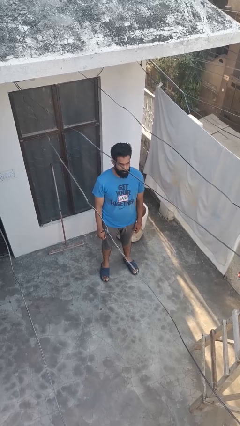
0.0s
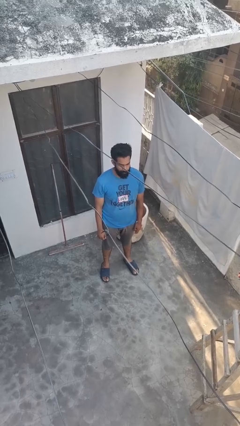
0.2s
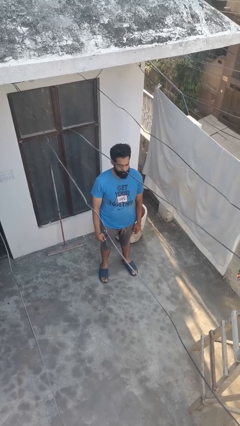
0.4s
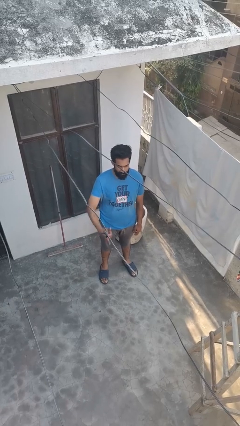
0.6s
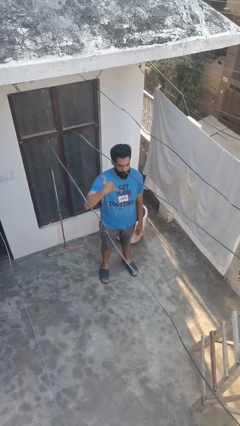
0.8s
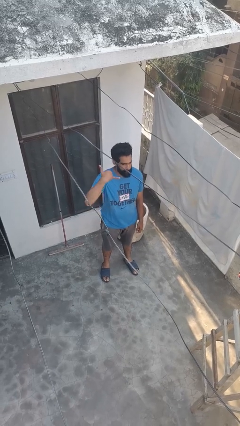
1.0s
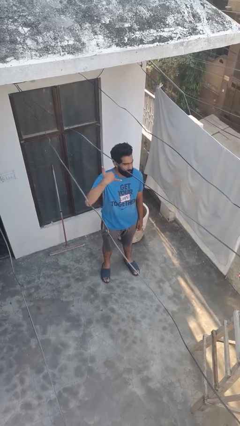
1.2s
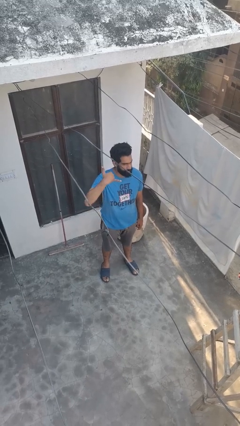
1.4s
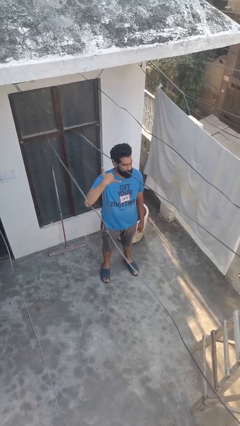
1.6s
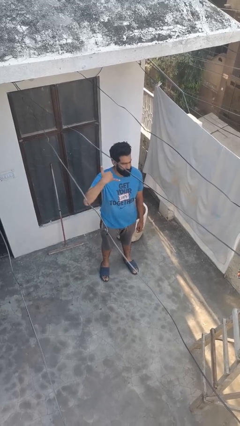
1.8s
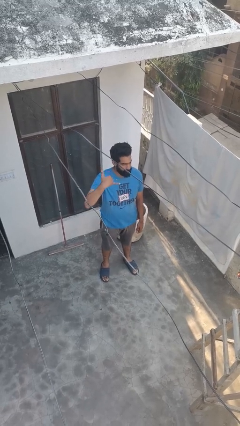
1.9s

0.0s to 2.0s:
person gestures call me

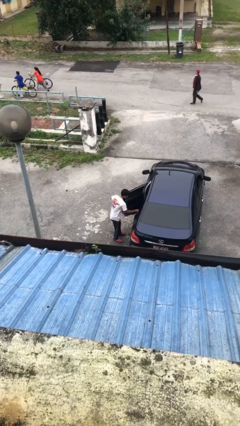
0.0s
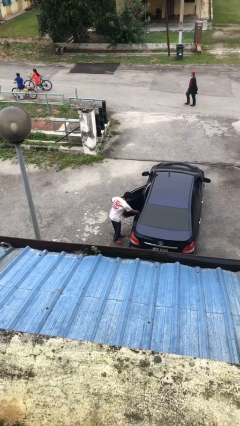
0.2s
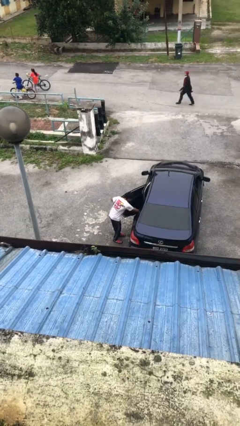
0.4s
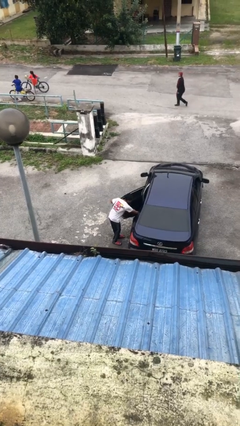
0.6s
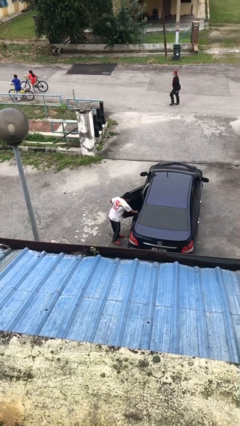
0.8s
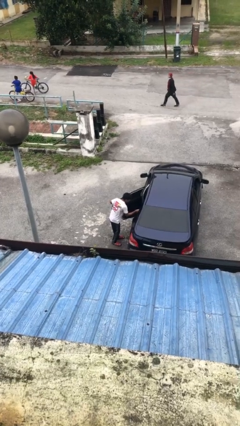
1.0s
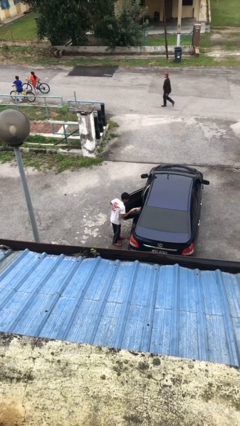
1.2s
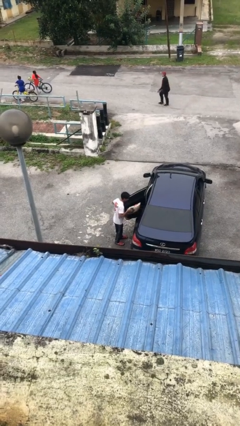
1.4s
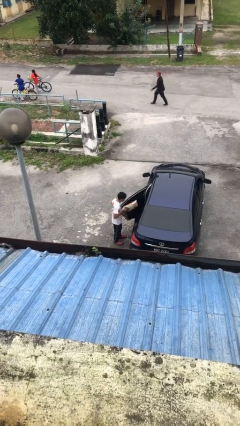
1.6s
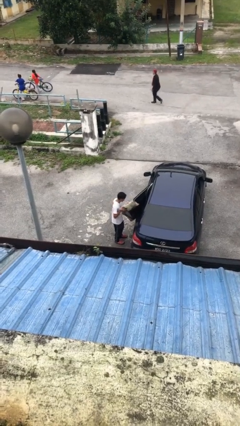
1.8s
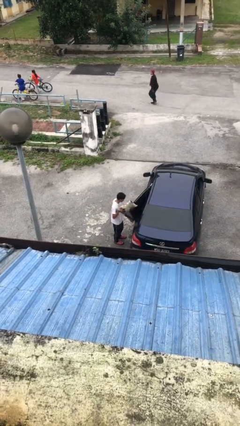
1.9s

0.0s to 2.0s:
person unloads car

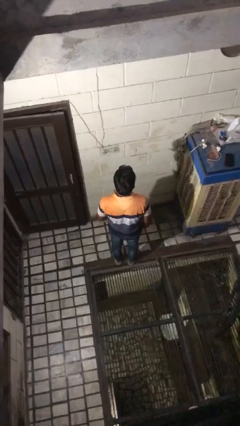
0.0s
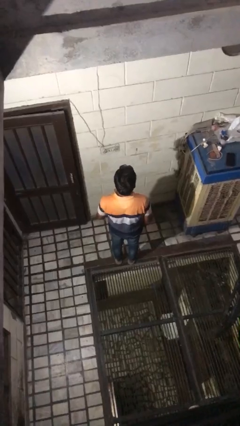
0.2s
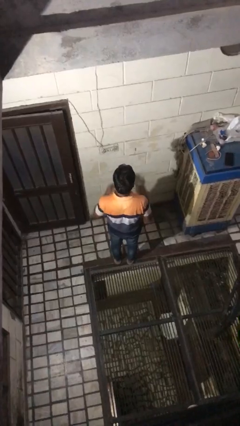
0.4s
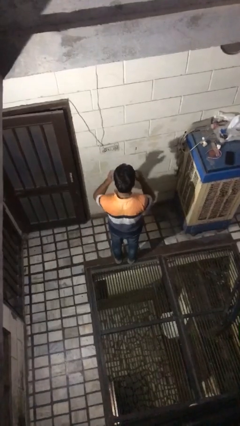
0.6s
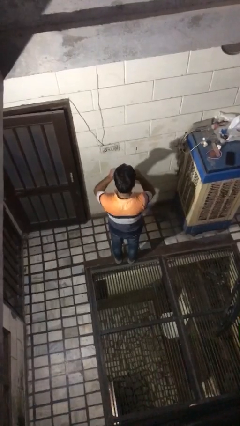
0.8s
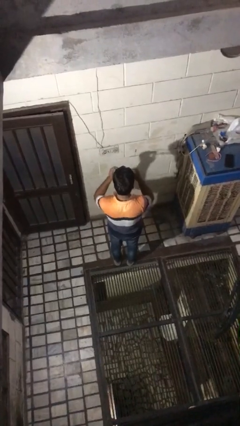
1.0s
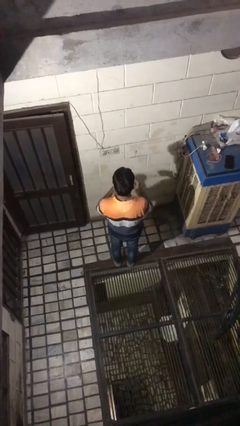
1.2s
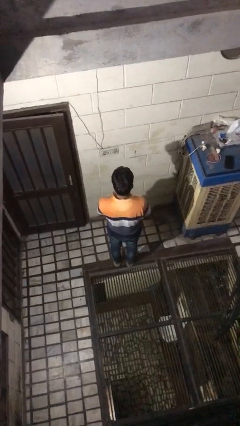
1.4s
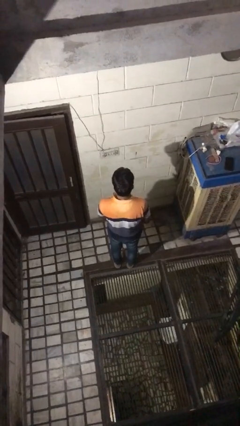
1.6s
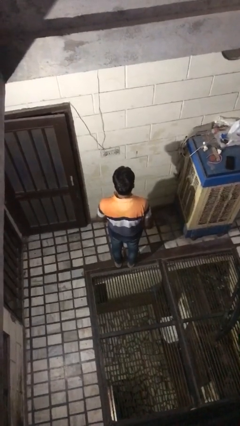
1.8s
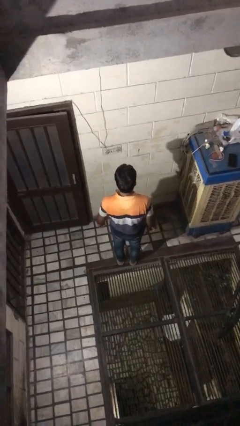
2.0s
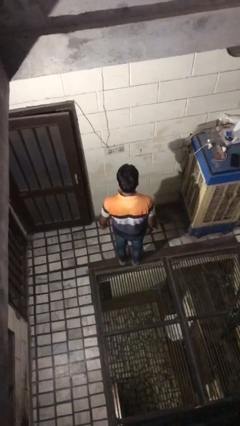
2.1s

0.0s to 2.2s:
person takes off glasses

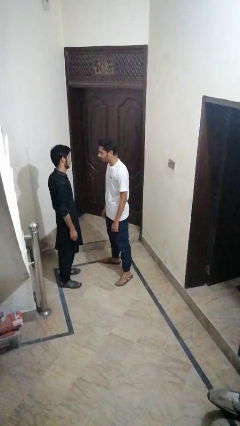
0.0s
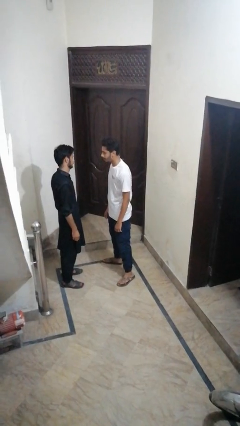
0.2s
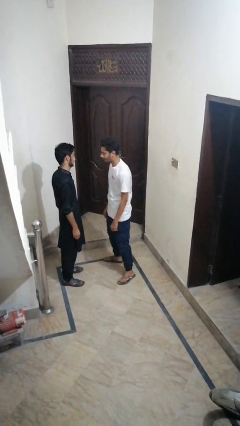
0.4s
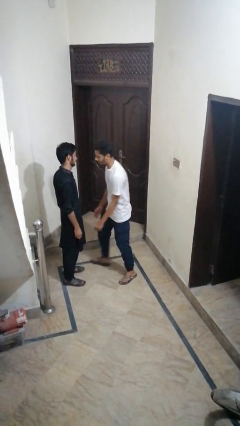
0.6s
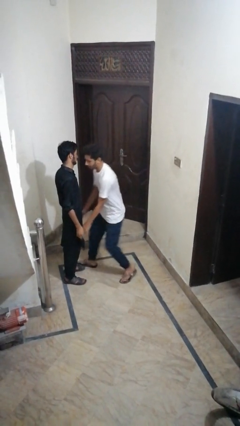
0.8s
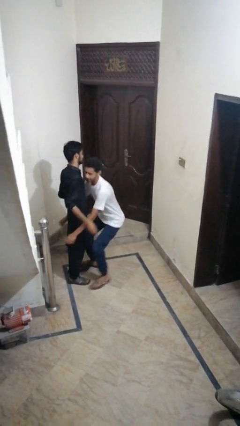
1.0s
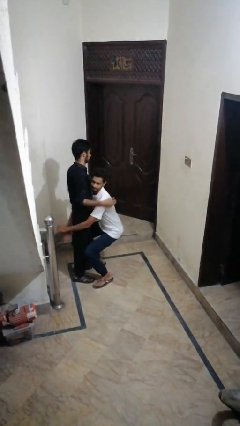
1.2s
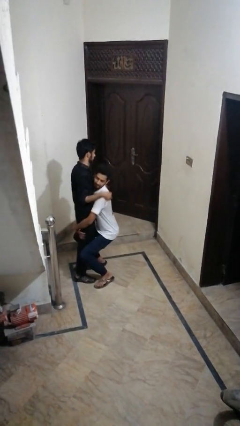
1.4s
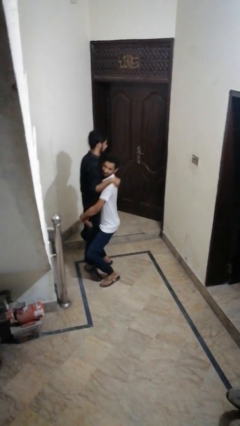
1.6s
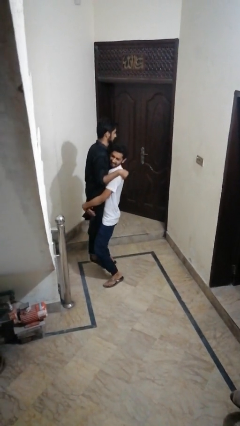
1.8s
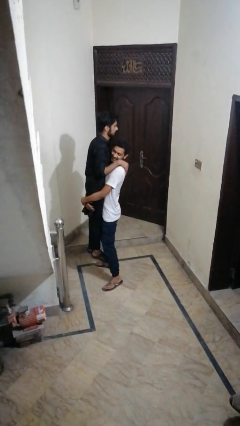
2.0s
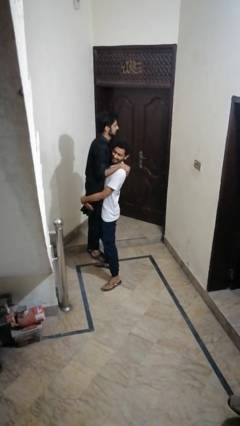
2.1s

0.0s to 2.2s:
person puts on facemask

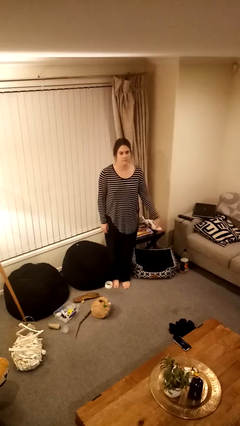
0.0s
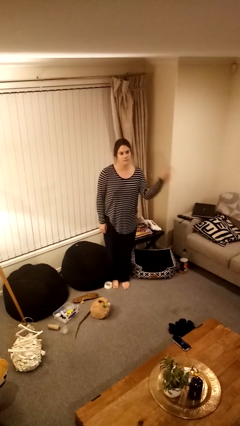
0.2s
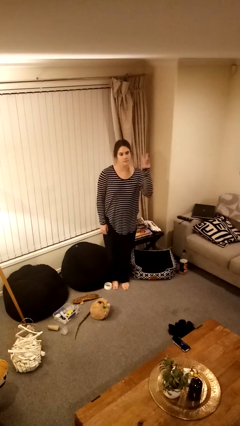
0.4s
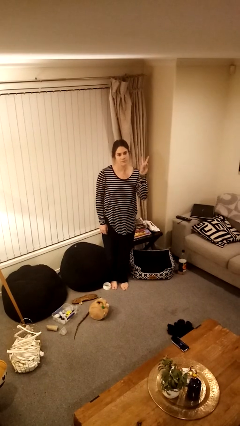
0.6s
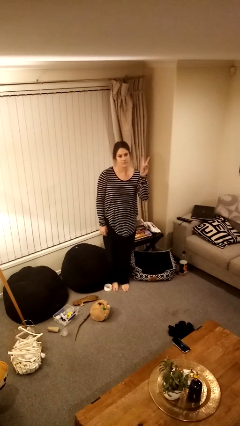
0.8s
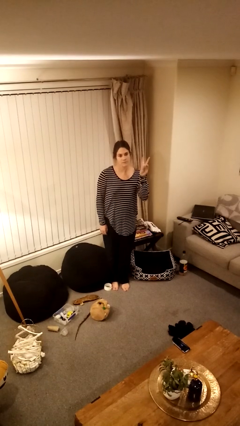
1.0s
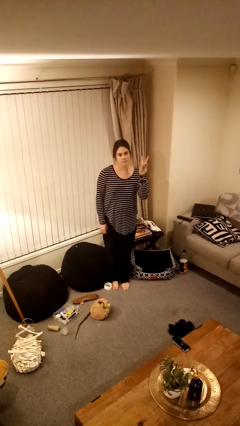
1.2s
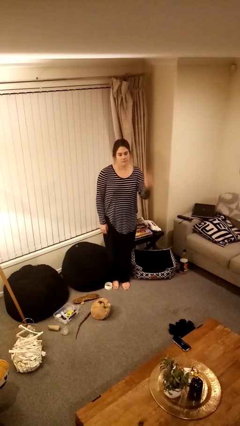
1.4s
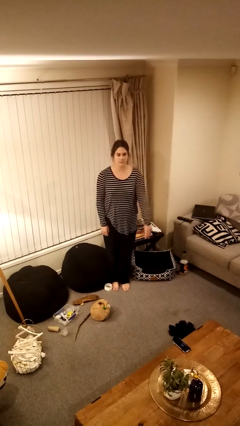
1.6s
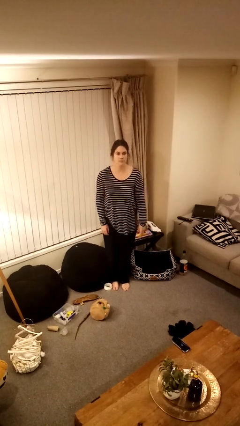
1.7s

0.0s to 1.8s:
person gestures peace

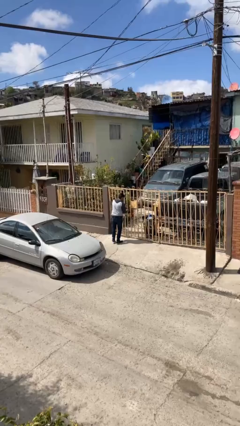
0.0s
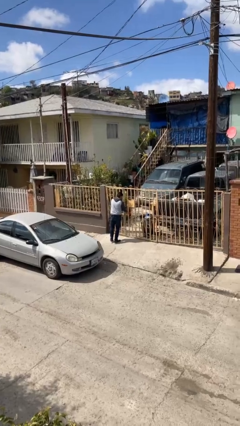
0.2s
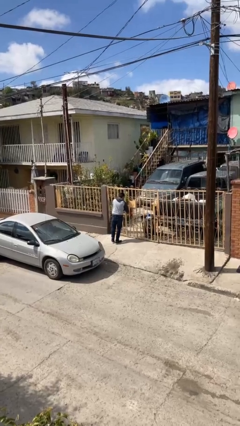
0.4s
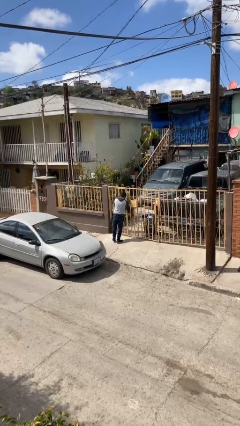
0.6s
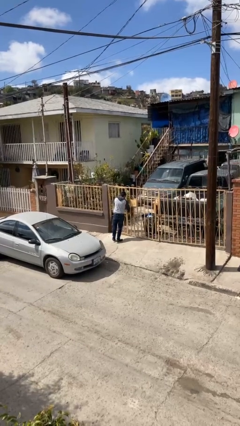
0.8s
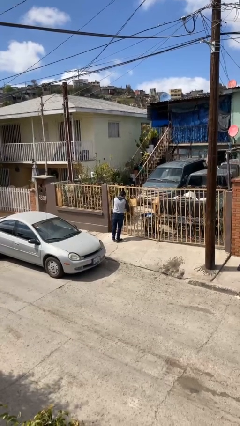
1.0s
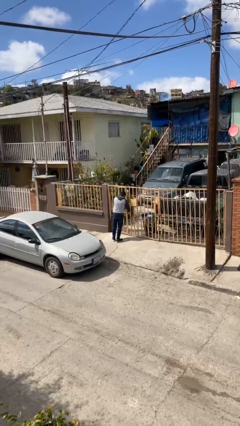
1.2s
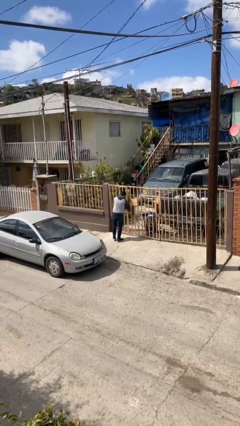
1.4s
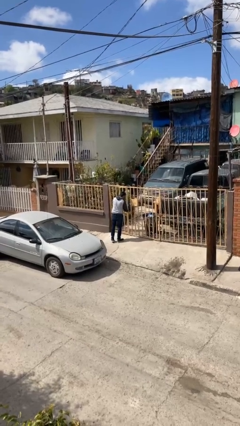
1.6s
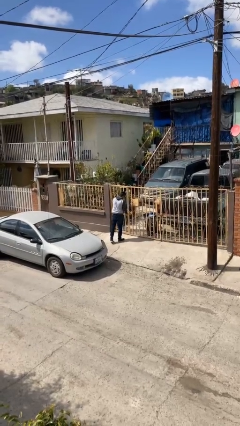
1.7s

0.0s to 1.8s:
person closes facility door

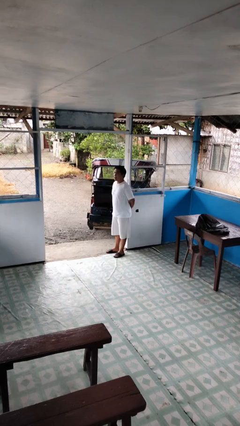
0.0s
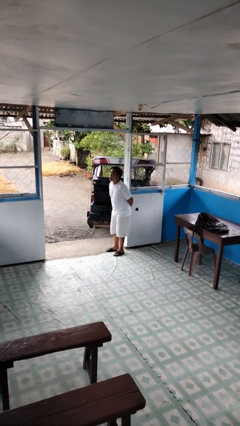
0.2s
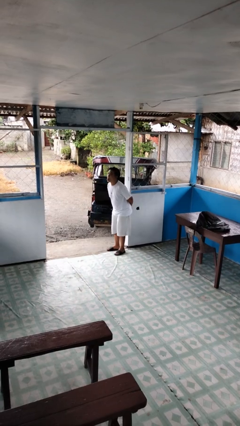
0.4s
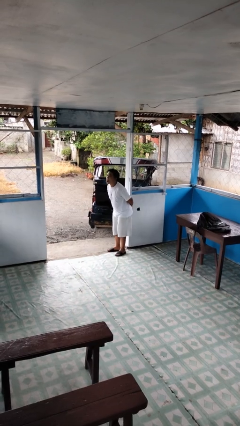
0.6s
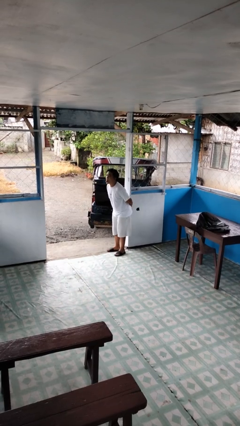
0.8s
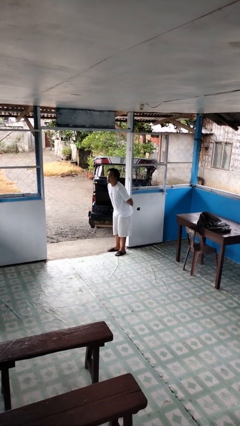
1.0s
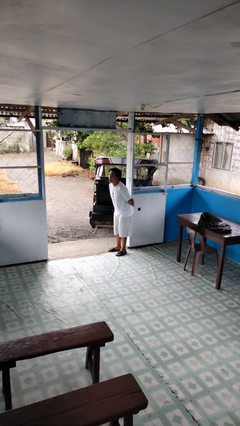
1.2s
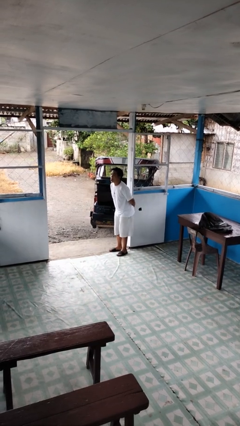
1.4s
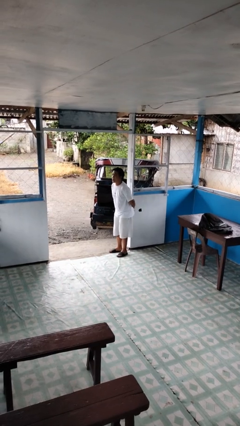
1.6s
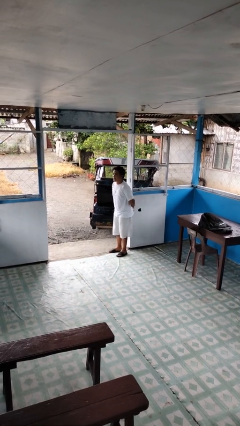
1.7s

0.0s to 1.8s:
person sticks out tongue

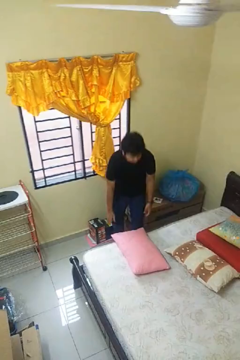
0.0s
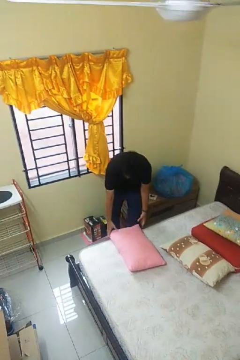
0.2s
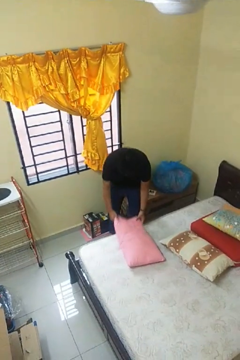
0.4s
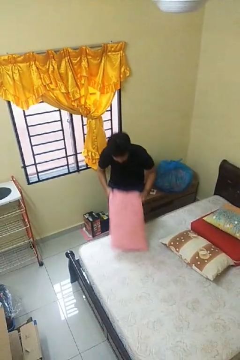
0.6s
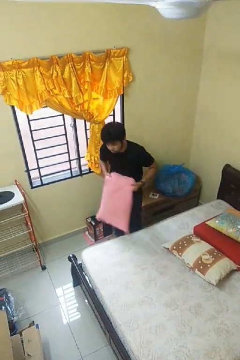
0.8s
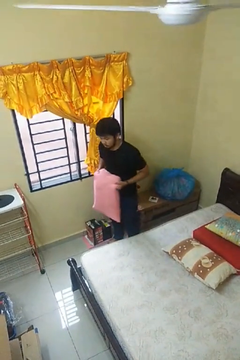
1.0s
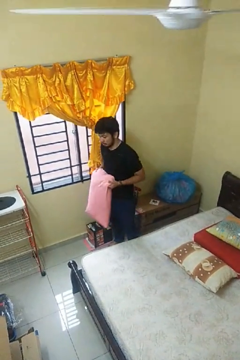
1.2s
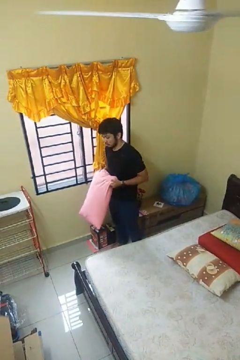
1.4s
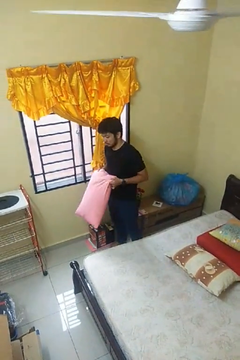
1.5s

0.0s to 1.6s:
person picks up object from bed

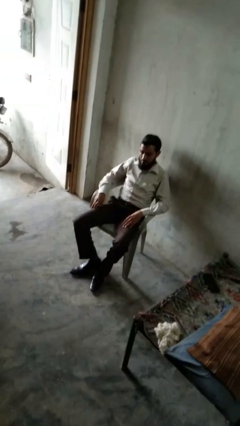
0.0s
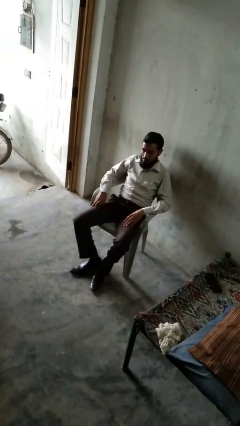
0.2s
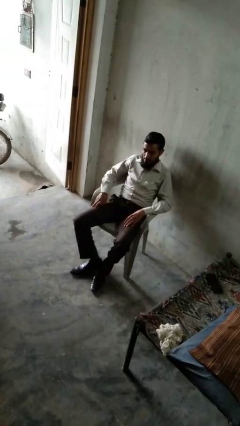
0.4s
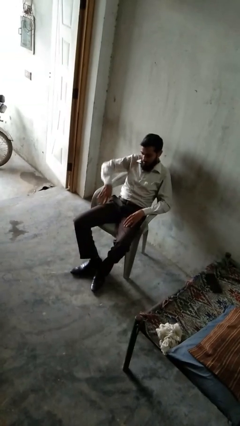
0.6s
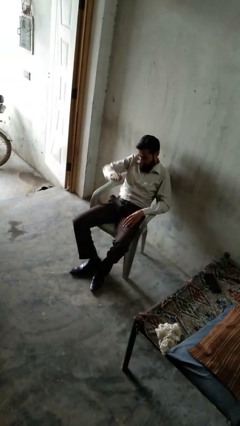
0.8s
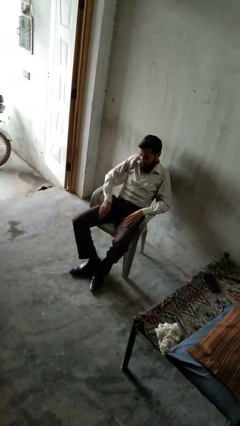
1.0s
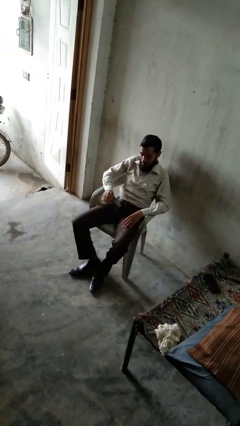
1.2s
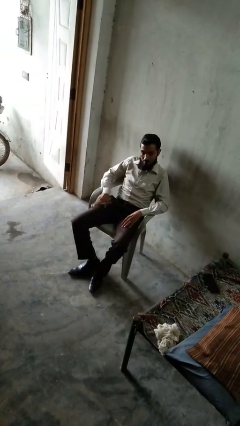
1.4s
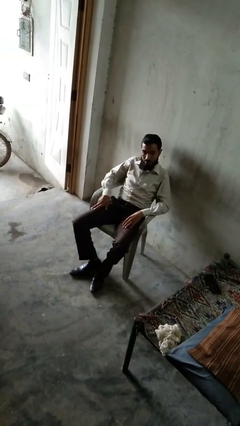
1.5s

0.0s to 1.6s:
person slaps hands on thighs
